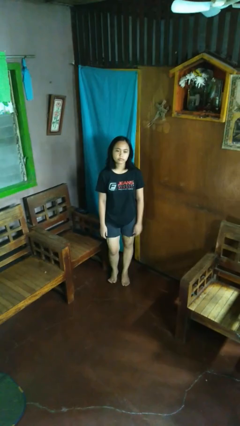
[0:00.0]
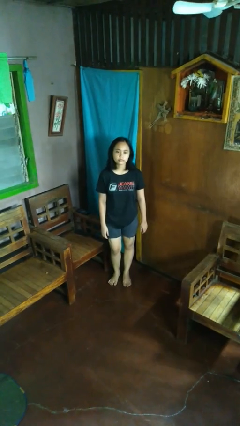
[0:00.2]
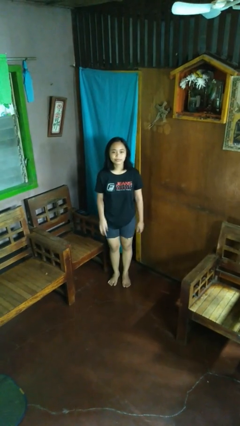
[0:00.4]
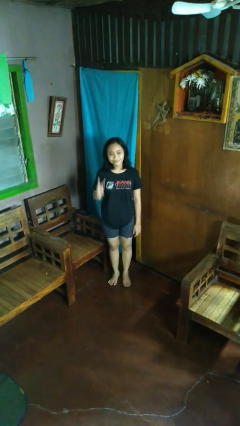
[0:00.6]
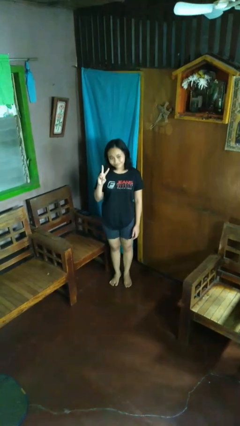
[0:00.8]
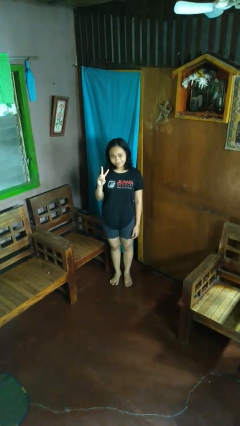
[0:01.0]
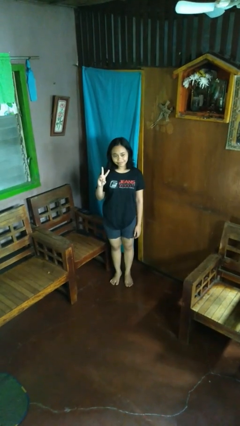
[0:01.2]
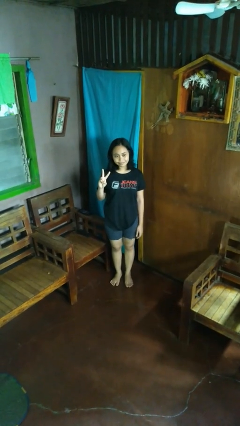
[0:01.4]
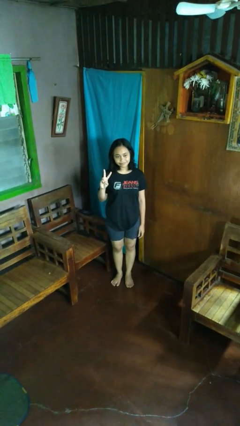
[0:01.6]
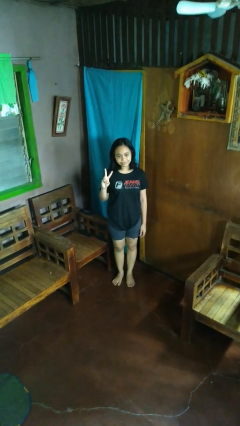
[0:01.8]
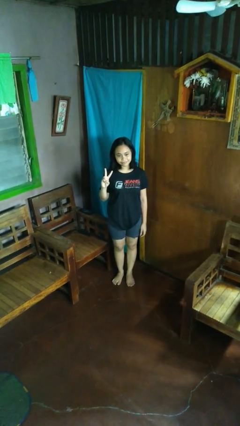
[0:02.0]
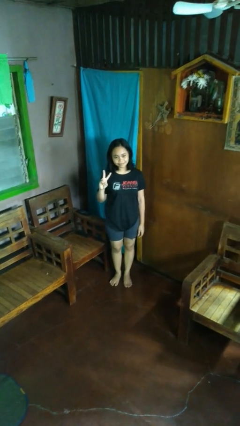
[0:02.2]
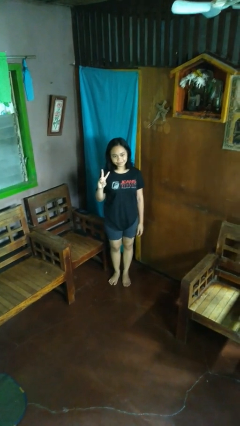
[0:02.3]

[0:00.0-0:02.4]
person gestures peace

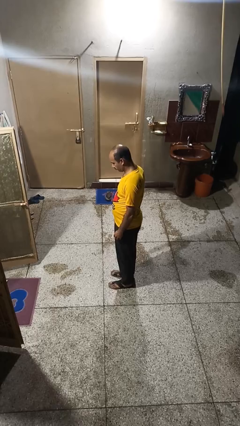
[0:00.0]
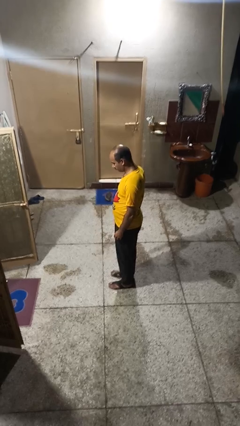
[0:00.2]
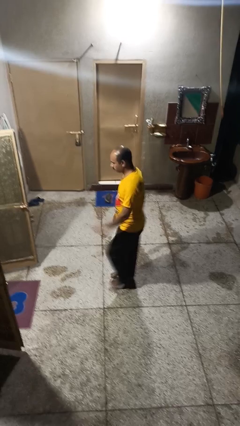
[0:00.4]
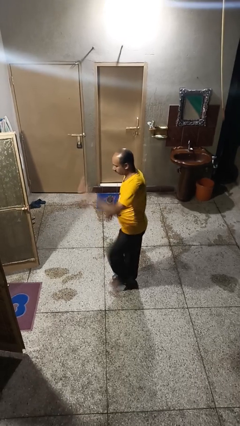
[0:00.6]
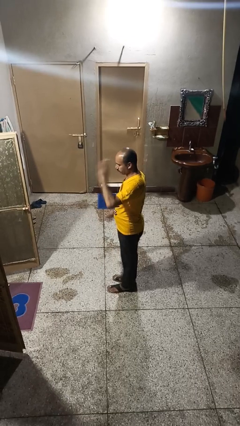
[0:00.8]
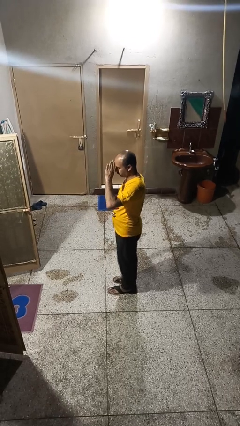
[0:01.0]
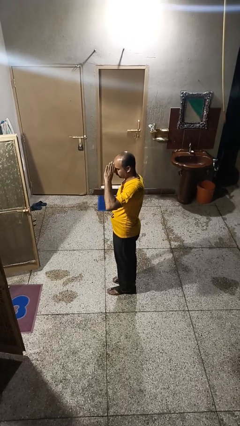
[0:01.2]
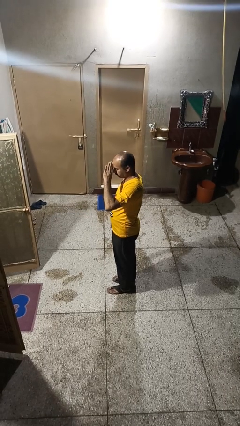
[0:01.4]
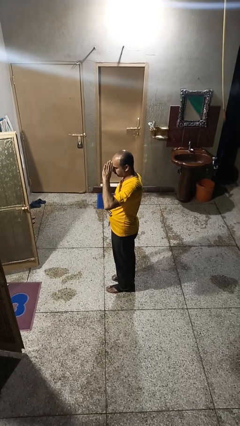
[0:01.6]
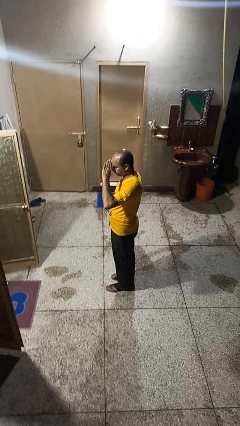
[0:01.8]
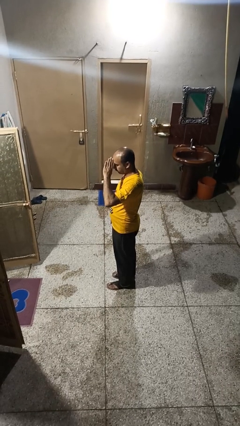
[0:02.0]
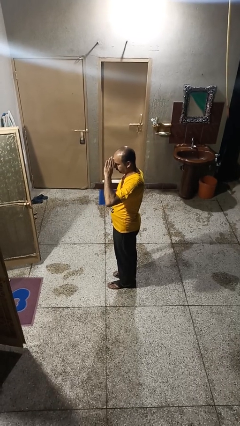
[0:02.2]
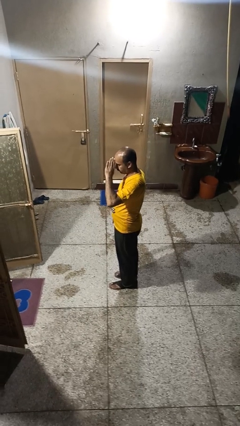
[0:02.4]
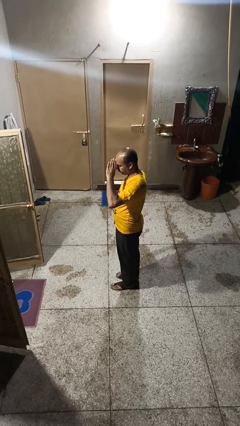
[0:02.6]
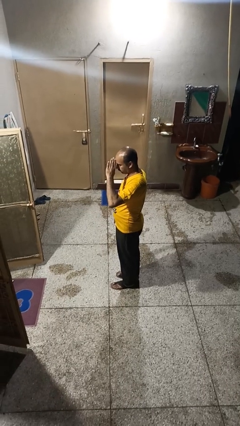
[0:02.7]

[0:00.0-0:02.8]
person salutes

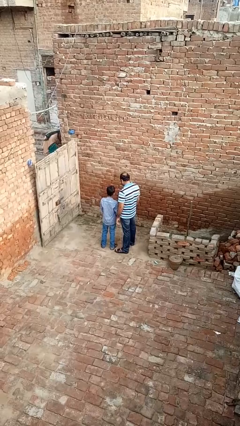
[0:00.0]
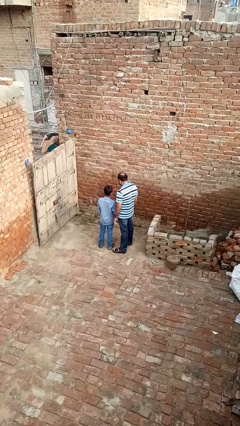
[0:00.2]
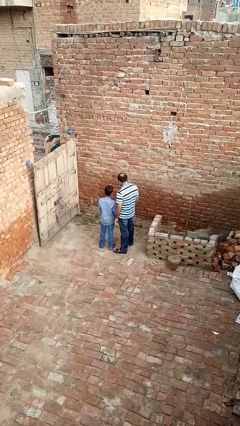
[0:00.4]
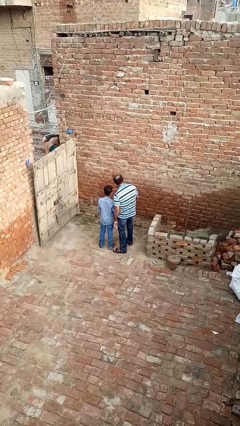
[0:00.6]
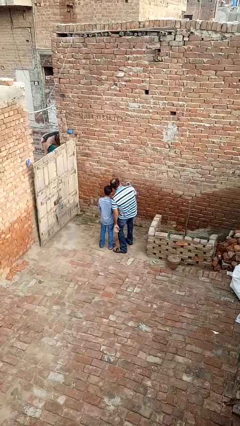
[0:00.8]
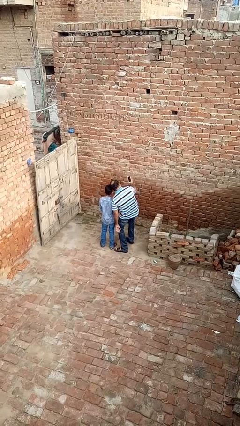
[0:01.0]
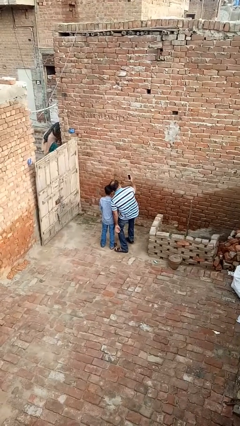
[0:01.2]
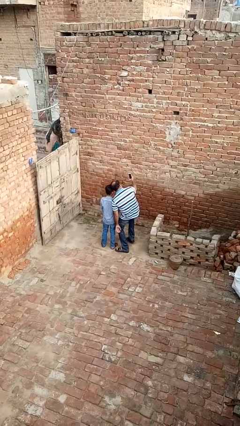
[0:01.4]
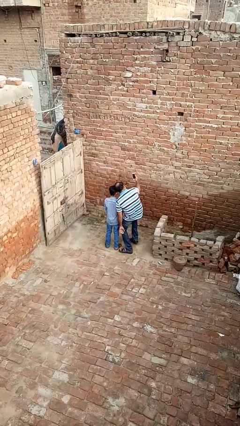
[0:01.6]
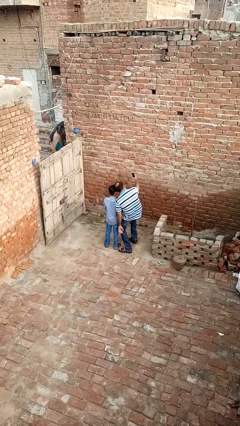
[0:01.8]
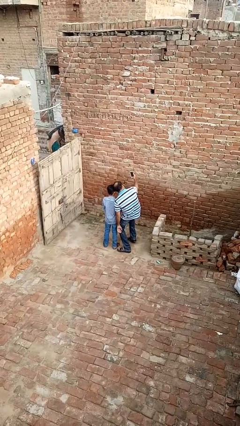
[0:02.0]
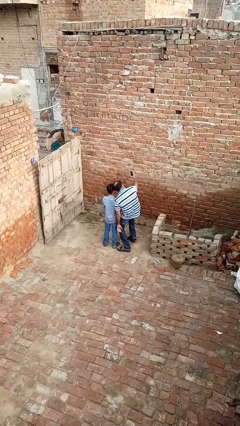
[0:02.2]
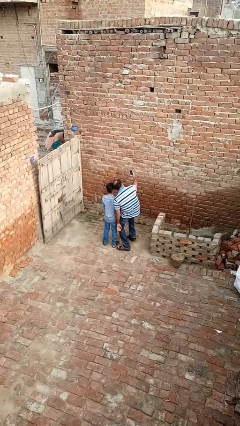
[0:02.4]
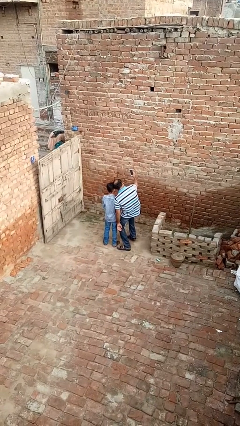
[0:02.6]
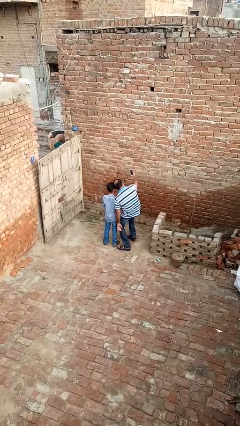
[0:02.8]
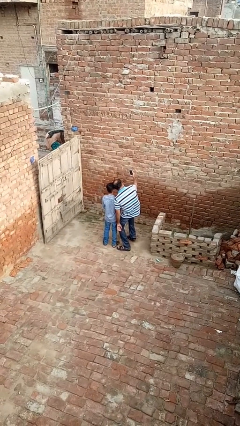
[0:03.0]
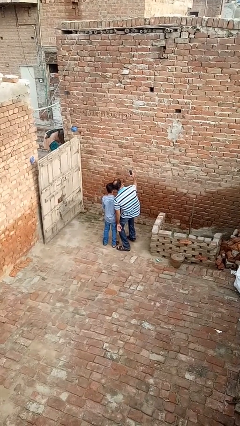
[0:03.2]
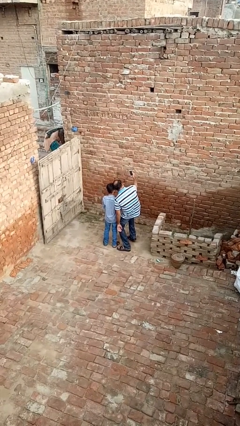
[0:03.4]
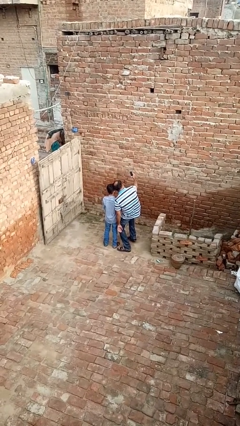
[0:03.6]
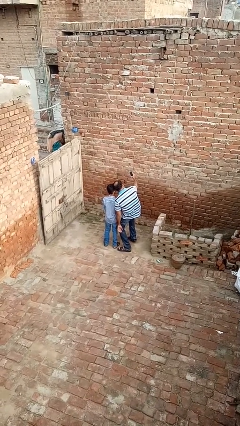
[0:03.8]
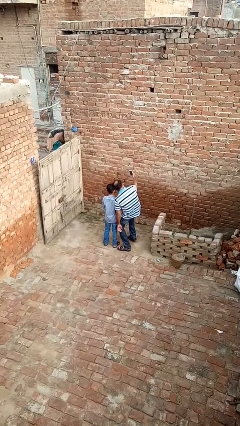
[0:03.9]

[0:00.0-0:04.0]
person takes selfie with person

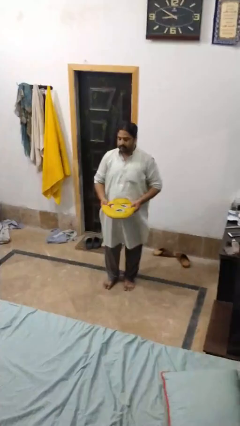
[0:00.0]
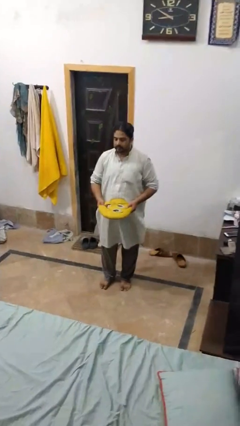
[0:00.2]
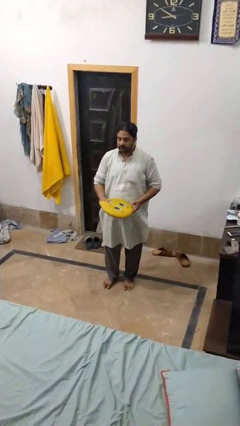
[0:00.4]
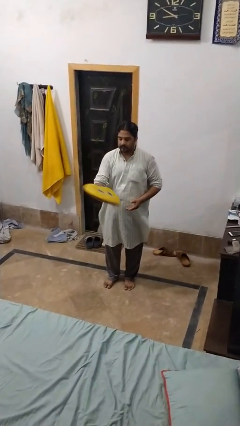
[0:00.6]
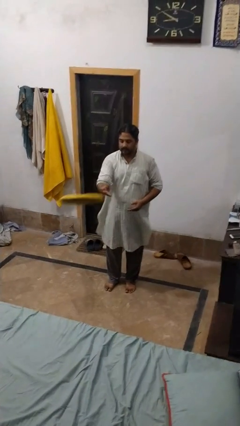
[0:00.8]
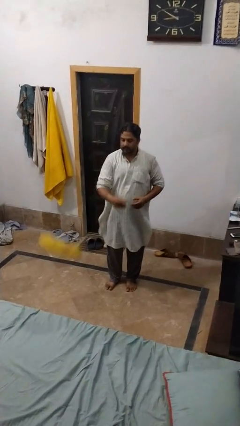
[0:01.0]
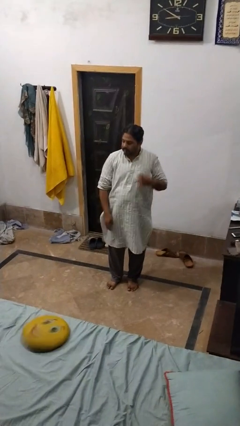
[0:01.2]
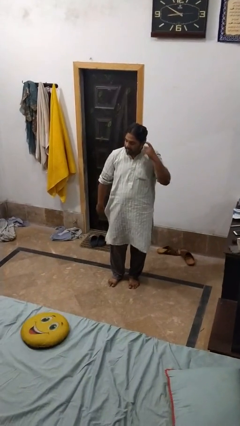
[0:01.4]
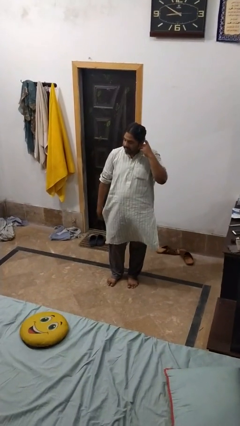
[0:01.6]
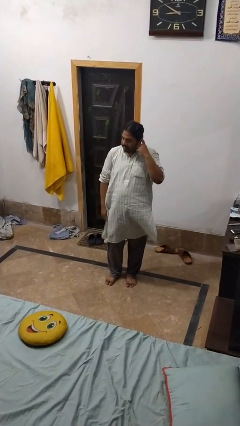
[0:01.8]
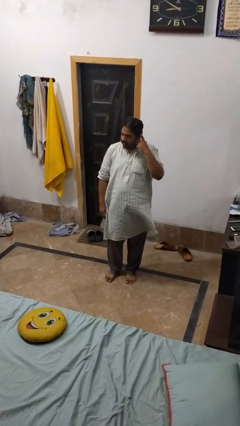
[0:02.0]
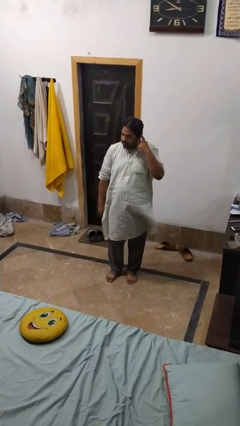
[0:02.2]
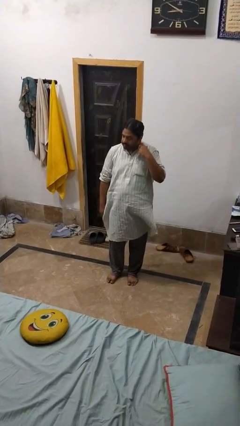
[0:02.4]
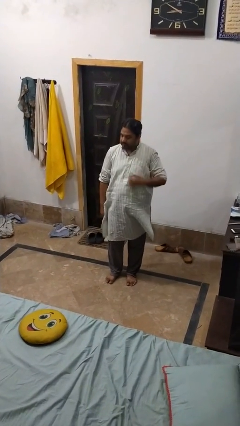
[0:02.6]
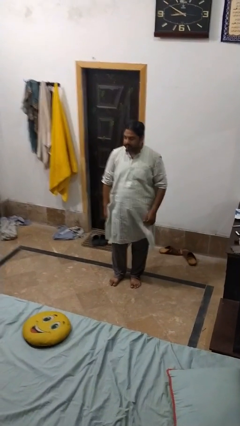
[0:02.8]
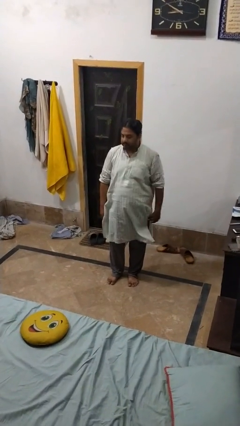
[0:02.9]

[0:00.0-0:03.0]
person throws object on bed

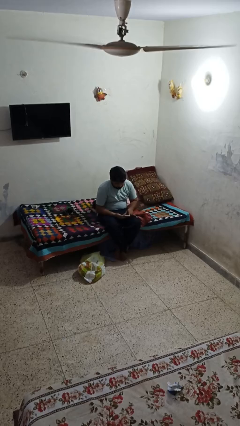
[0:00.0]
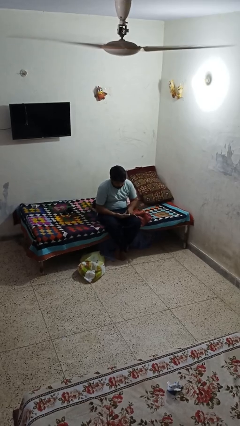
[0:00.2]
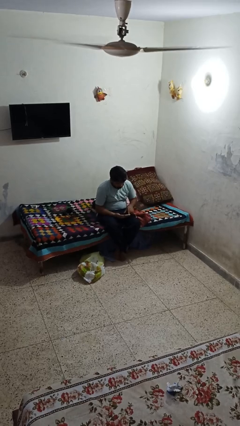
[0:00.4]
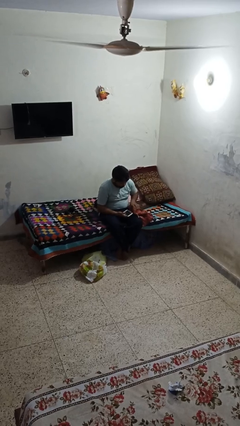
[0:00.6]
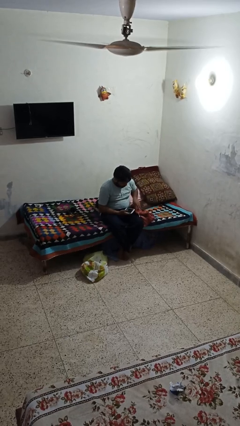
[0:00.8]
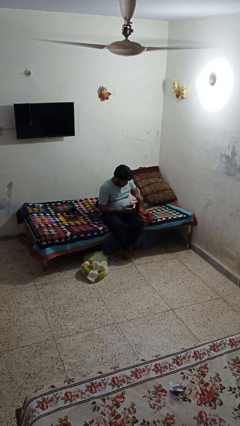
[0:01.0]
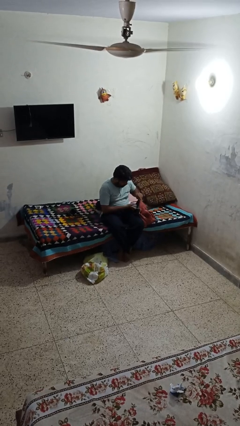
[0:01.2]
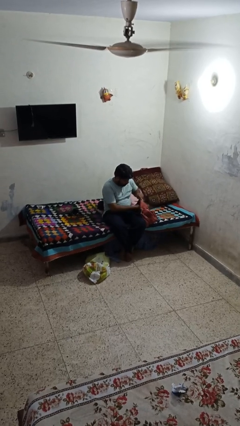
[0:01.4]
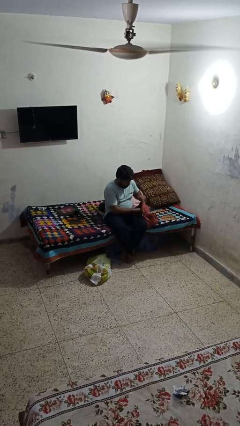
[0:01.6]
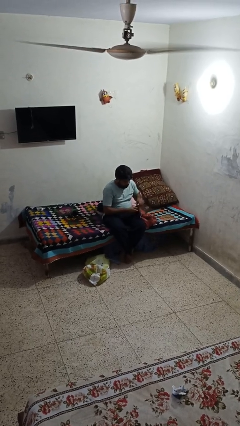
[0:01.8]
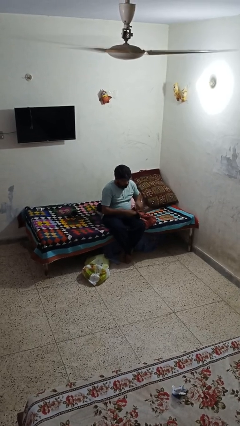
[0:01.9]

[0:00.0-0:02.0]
person puts object into purse

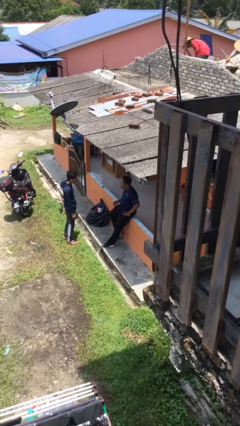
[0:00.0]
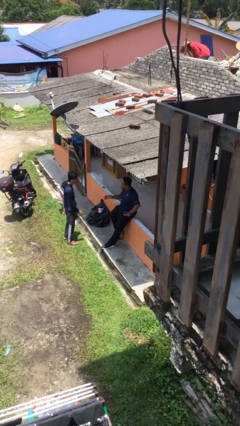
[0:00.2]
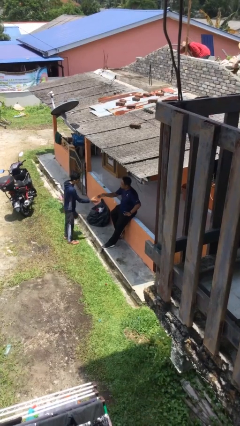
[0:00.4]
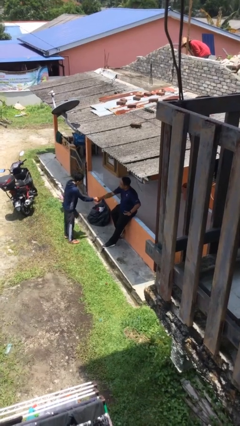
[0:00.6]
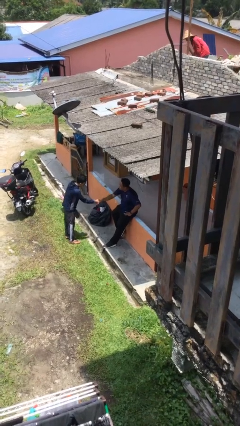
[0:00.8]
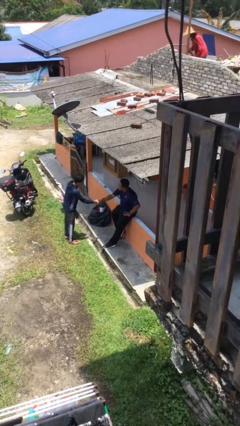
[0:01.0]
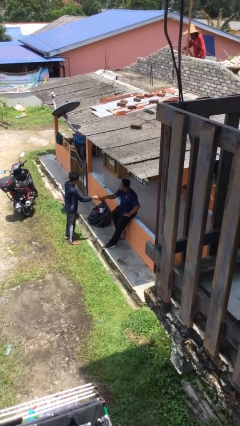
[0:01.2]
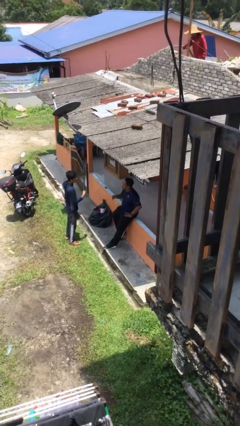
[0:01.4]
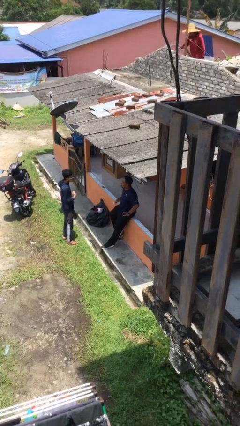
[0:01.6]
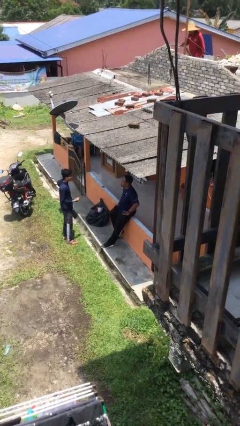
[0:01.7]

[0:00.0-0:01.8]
person shakes hand

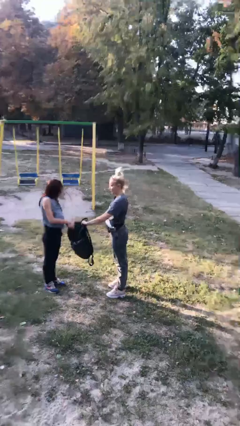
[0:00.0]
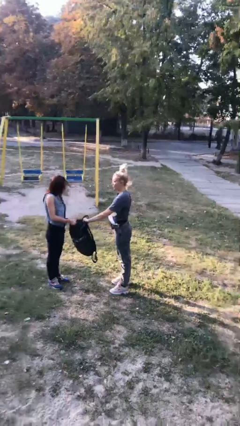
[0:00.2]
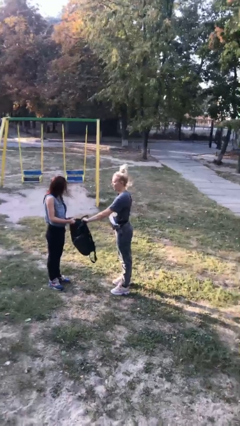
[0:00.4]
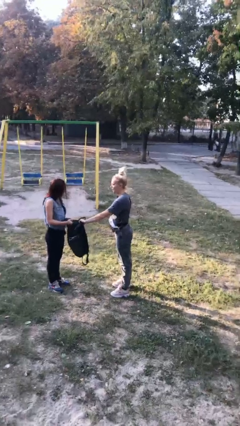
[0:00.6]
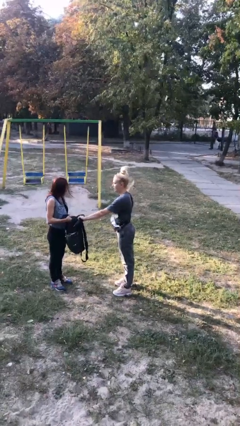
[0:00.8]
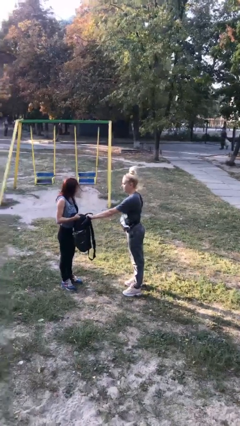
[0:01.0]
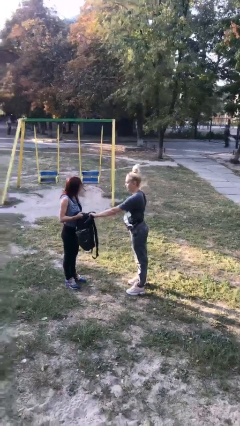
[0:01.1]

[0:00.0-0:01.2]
person transfers object to person
